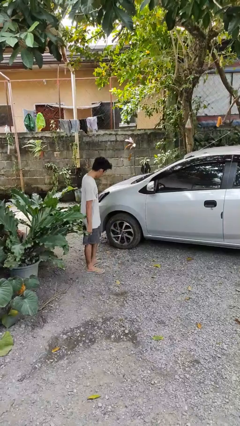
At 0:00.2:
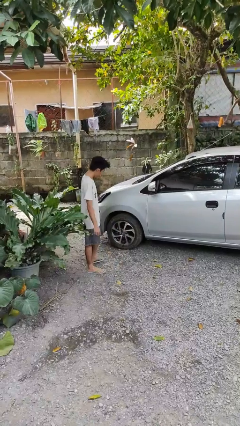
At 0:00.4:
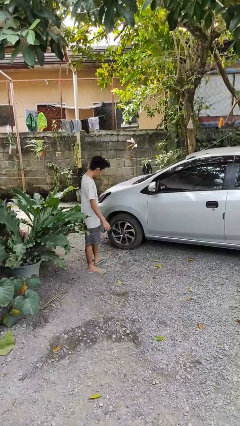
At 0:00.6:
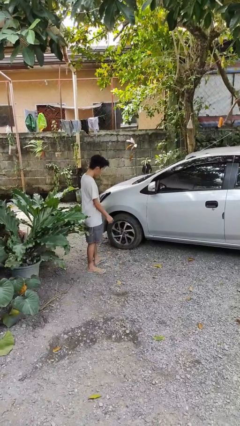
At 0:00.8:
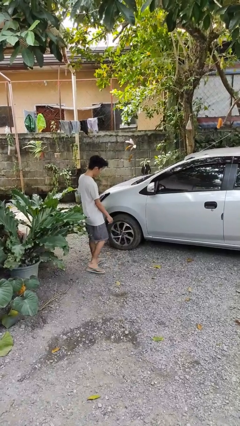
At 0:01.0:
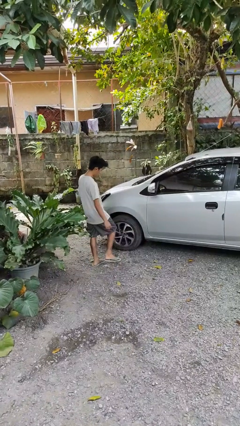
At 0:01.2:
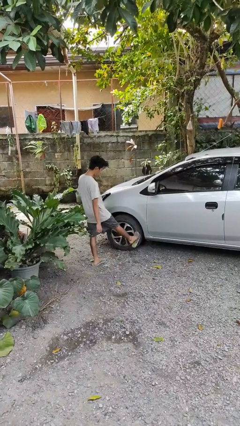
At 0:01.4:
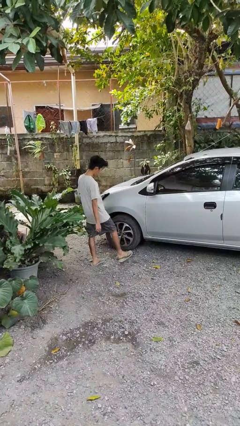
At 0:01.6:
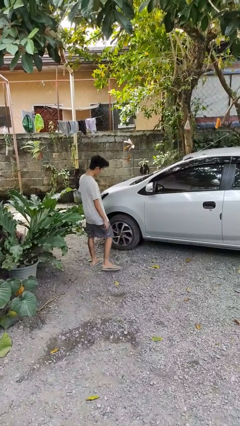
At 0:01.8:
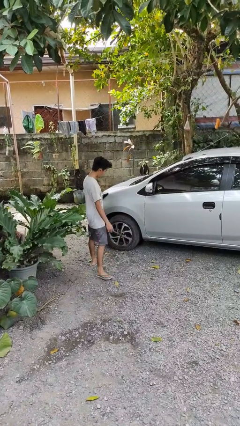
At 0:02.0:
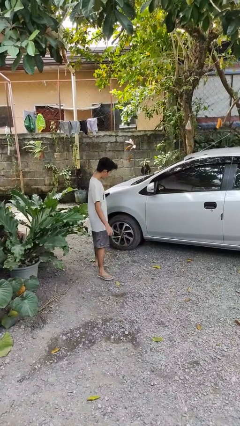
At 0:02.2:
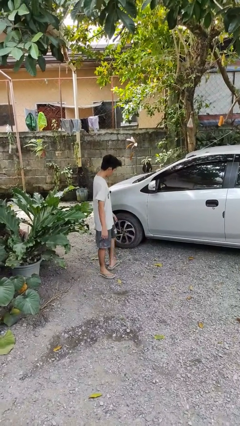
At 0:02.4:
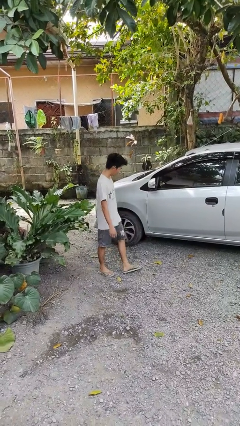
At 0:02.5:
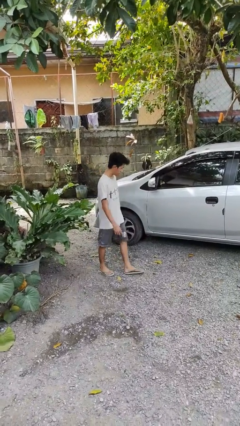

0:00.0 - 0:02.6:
person kicks car tires

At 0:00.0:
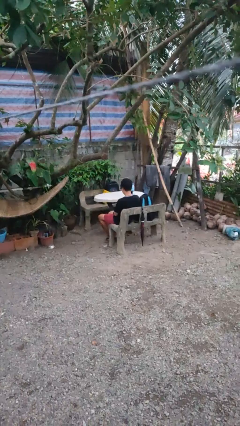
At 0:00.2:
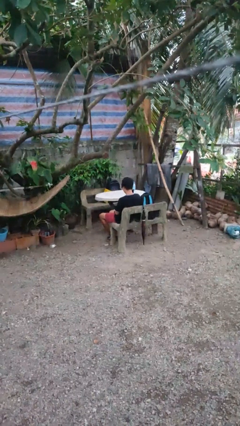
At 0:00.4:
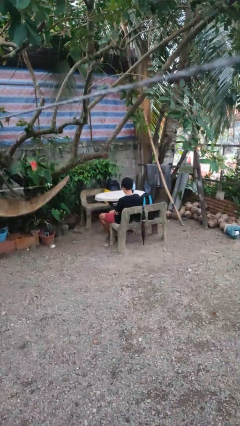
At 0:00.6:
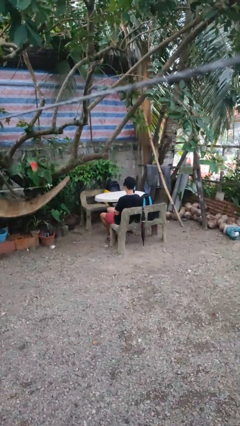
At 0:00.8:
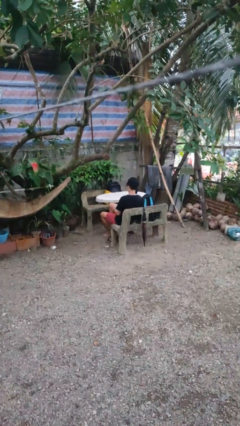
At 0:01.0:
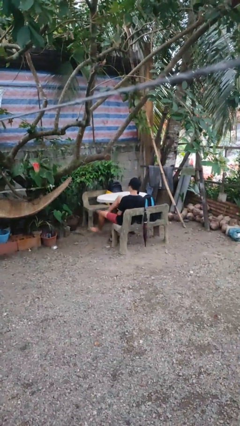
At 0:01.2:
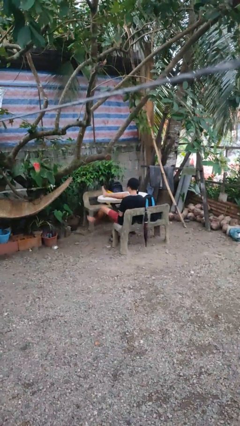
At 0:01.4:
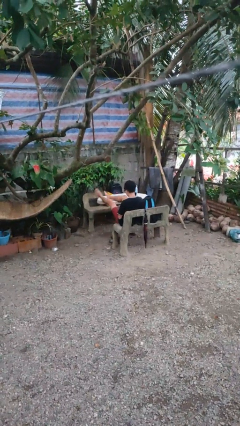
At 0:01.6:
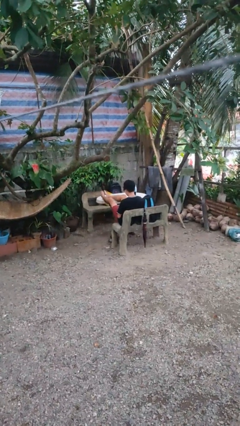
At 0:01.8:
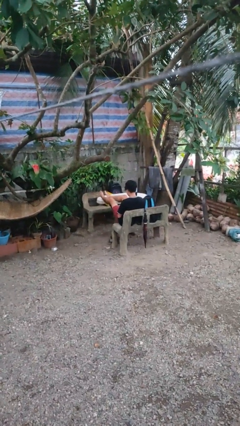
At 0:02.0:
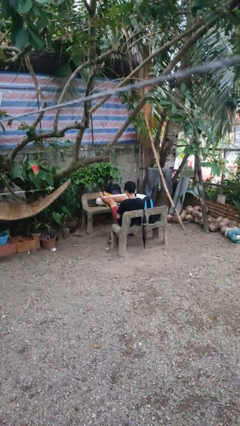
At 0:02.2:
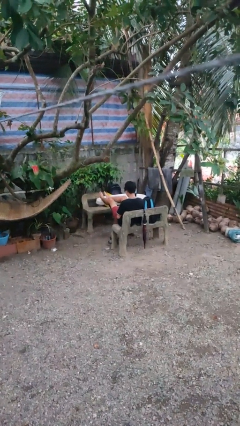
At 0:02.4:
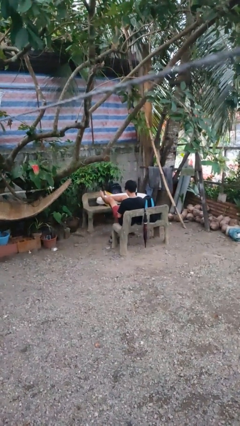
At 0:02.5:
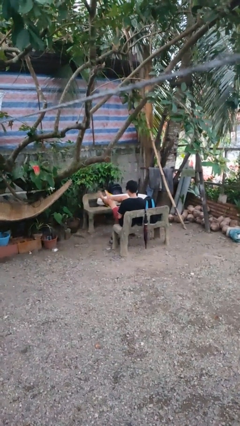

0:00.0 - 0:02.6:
person puts feet up

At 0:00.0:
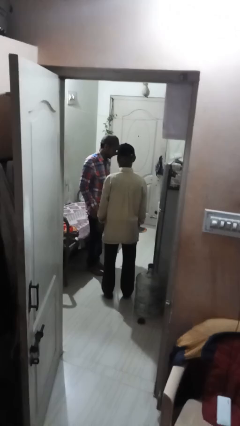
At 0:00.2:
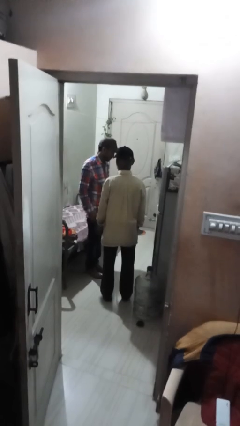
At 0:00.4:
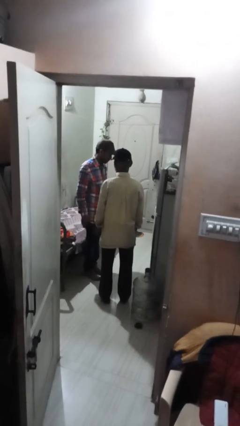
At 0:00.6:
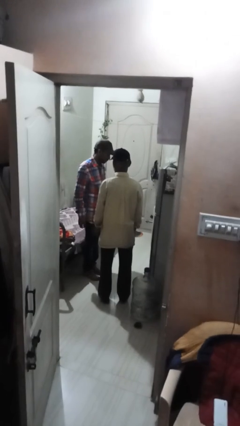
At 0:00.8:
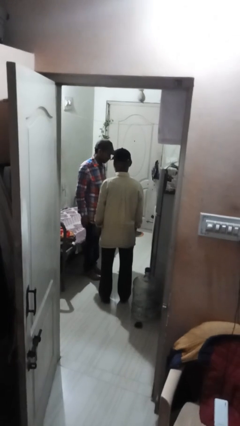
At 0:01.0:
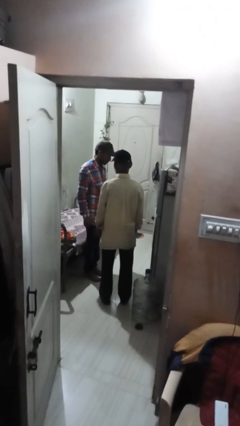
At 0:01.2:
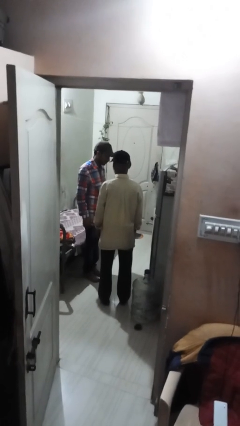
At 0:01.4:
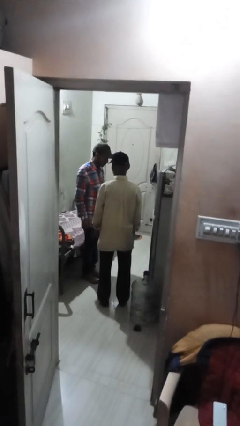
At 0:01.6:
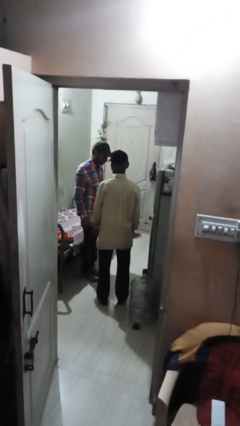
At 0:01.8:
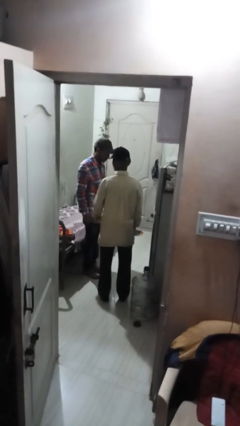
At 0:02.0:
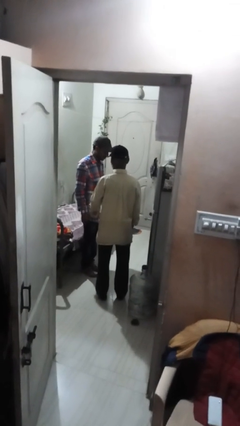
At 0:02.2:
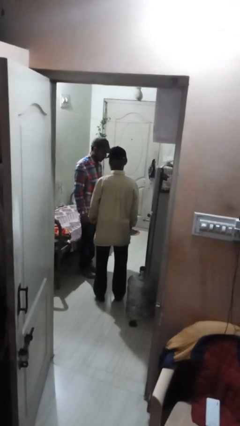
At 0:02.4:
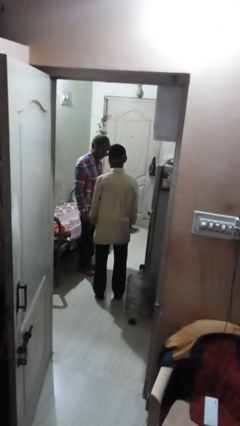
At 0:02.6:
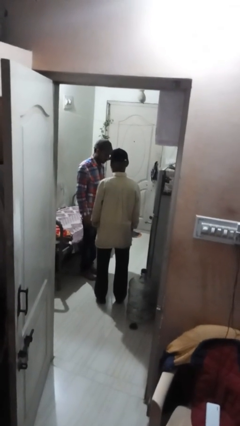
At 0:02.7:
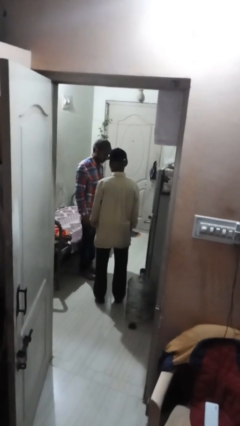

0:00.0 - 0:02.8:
person tickles person

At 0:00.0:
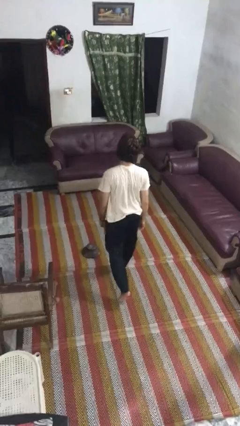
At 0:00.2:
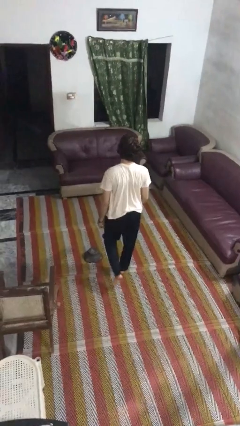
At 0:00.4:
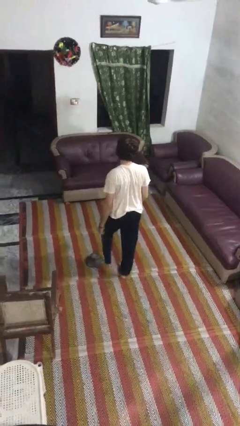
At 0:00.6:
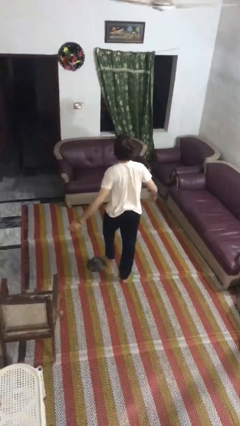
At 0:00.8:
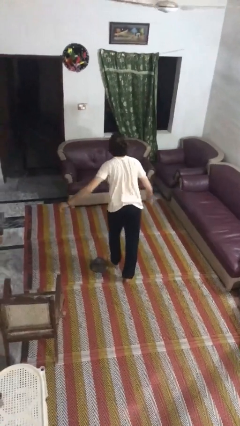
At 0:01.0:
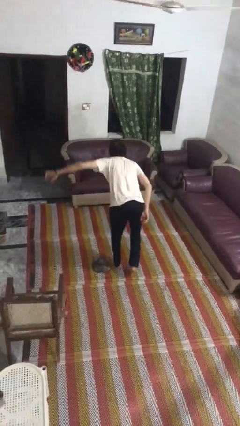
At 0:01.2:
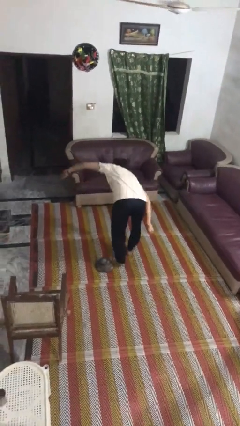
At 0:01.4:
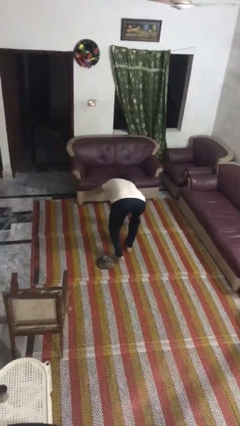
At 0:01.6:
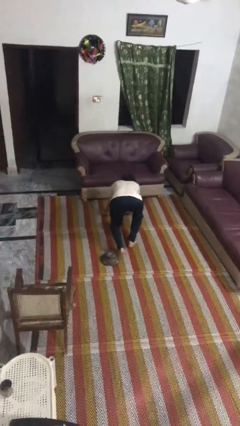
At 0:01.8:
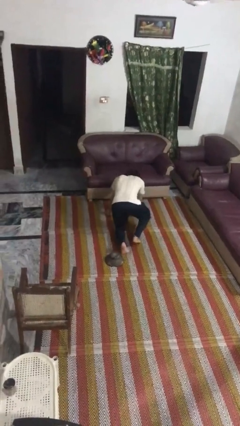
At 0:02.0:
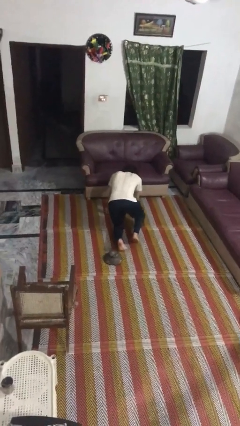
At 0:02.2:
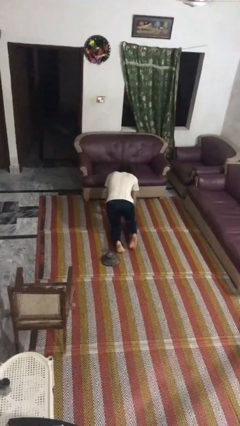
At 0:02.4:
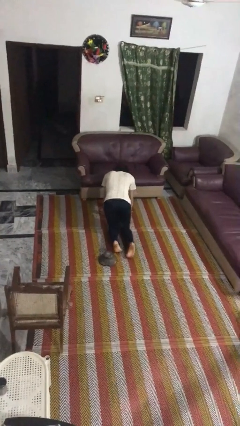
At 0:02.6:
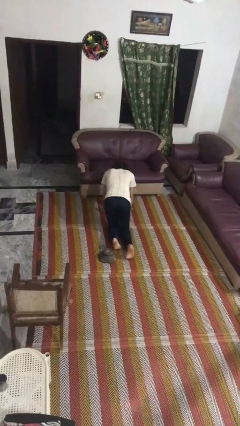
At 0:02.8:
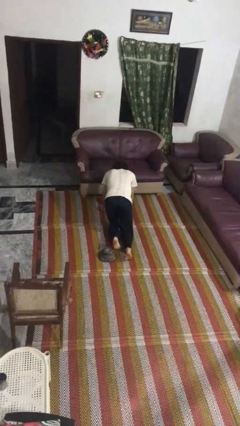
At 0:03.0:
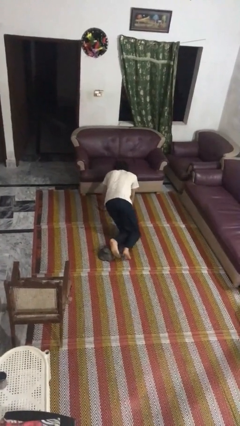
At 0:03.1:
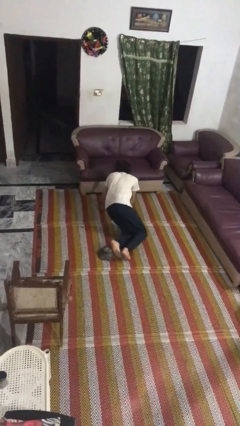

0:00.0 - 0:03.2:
person trips on object on floor

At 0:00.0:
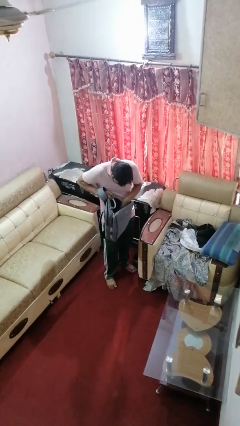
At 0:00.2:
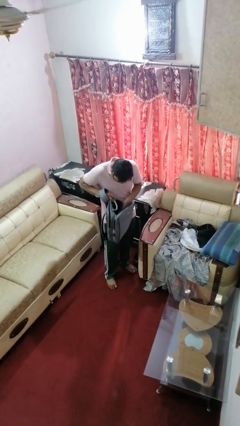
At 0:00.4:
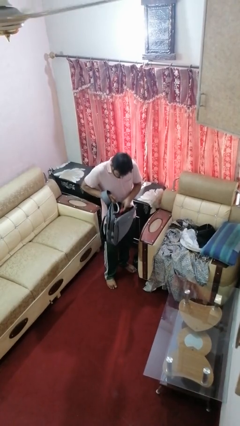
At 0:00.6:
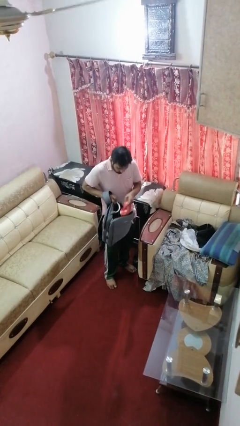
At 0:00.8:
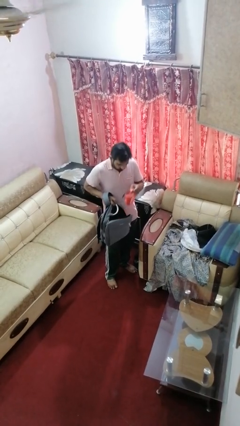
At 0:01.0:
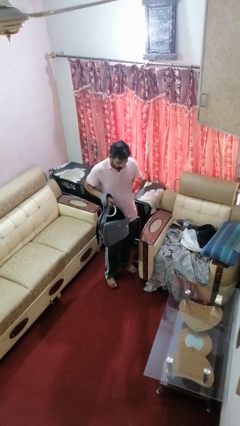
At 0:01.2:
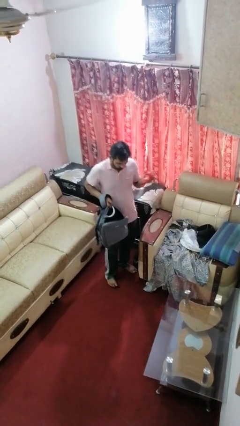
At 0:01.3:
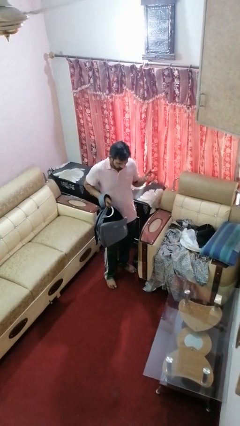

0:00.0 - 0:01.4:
person takes object from backpack

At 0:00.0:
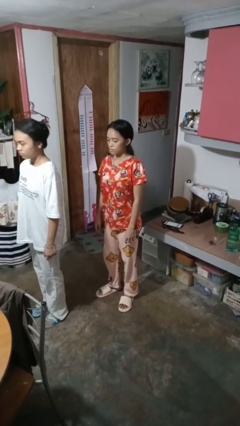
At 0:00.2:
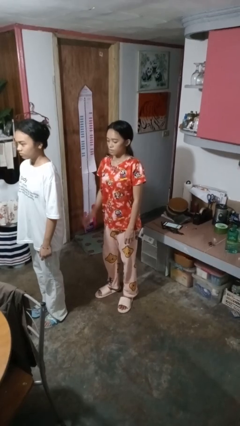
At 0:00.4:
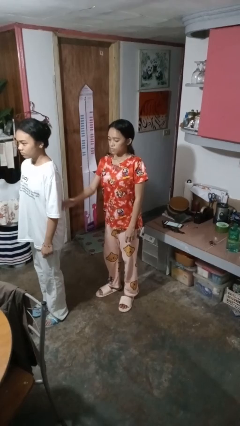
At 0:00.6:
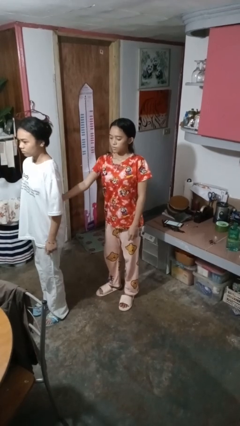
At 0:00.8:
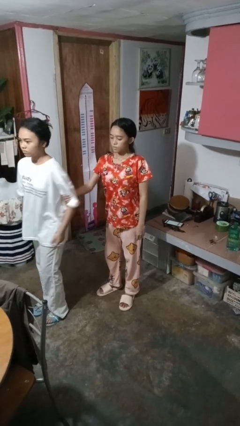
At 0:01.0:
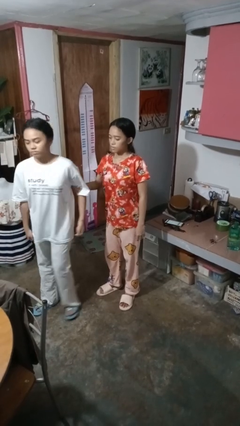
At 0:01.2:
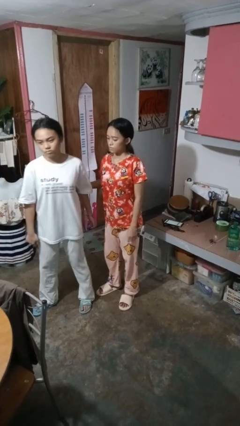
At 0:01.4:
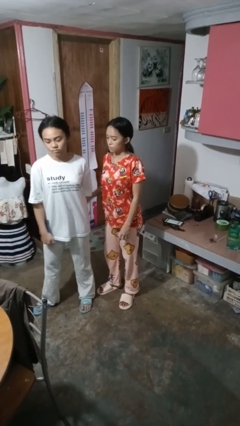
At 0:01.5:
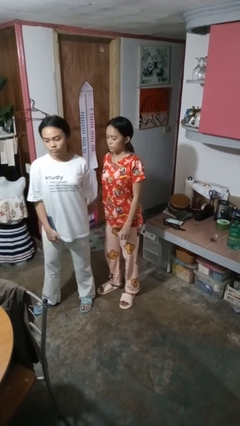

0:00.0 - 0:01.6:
person grabs person by bicep

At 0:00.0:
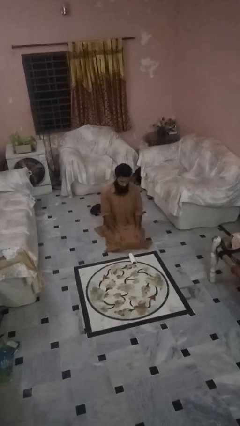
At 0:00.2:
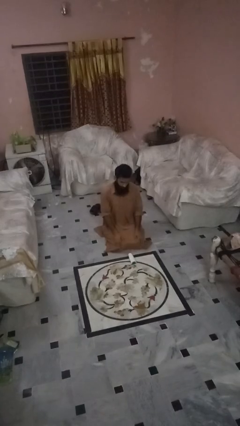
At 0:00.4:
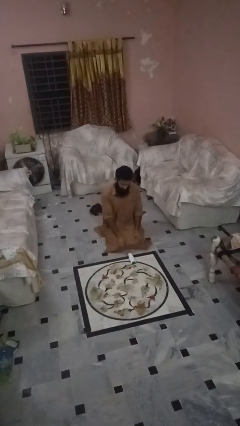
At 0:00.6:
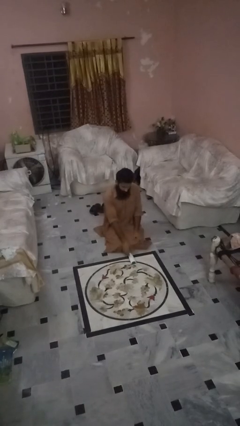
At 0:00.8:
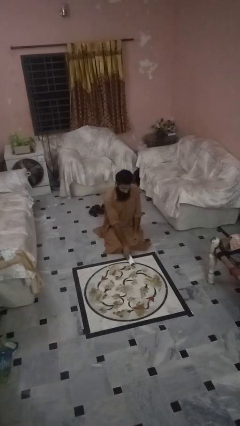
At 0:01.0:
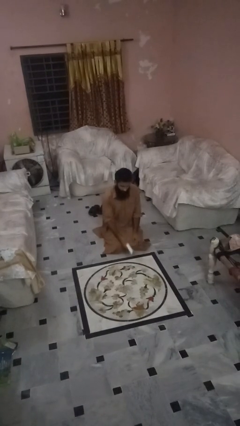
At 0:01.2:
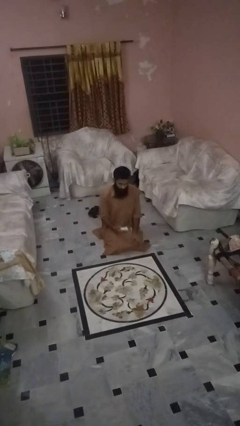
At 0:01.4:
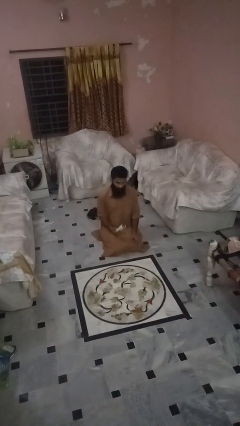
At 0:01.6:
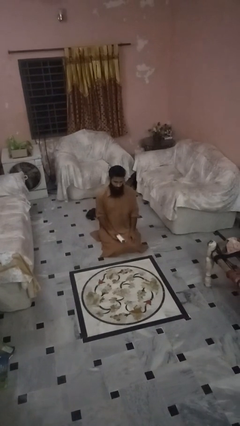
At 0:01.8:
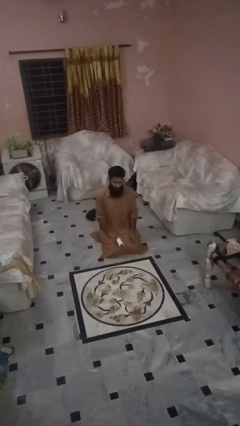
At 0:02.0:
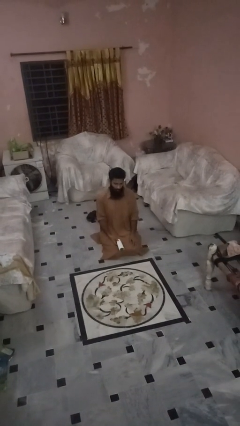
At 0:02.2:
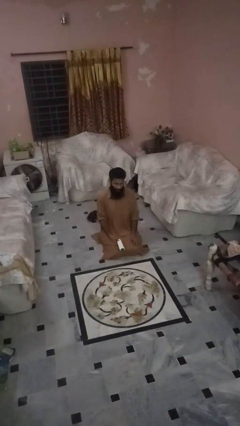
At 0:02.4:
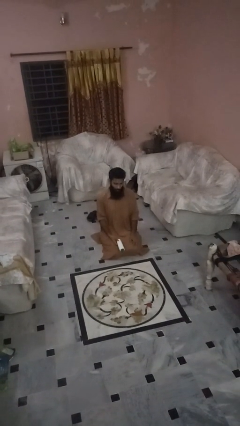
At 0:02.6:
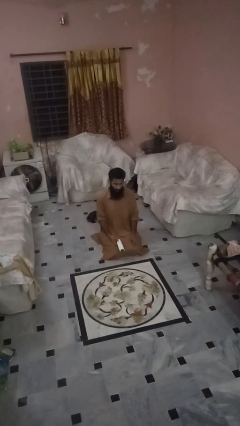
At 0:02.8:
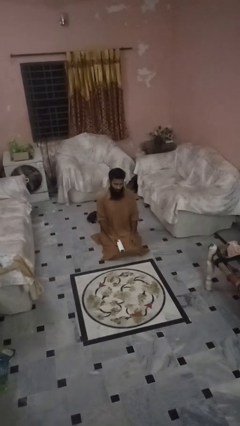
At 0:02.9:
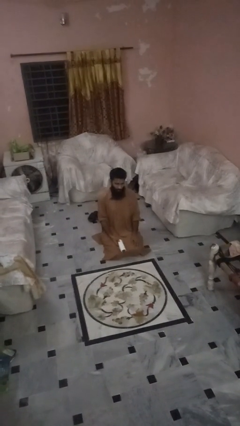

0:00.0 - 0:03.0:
person picks up object from floor
